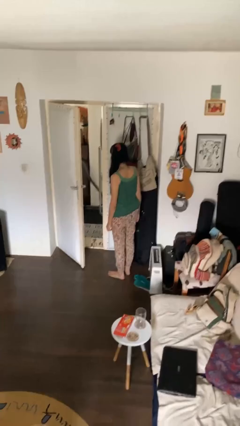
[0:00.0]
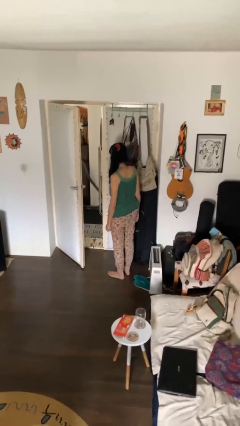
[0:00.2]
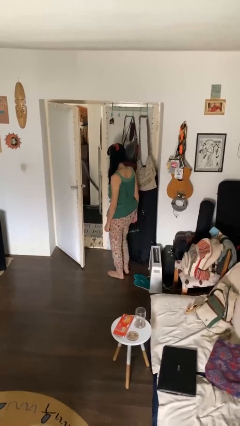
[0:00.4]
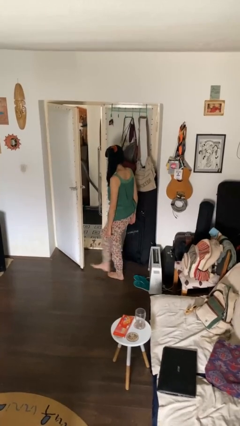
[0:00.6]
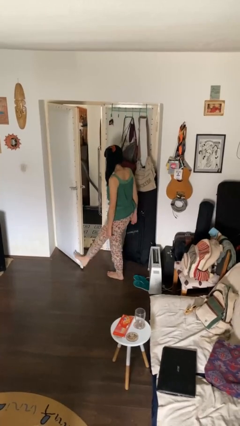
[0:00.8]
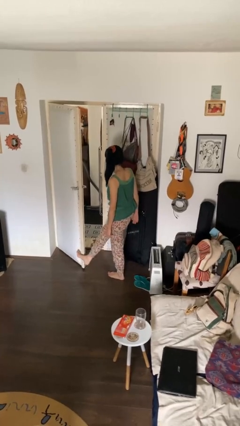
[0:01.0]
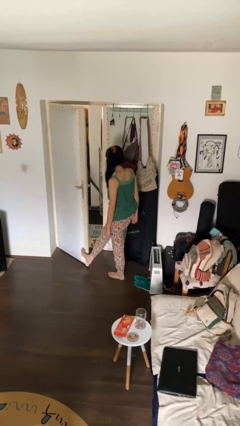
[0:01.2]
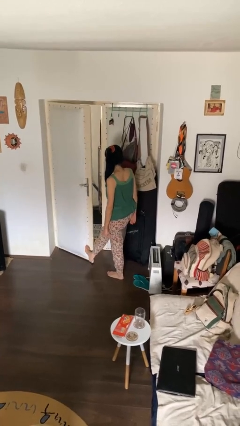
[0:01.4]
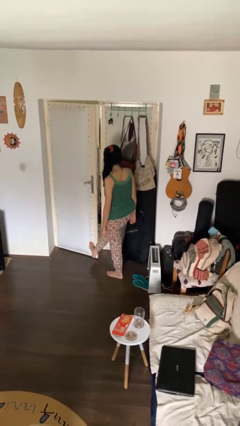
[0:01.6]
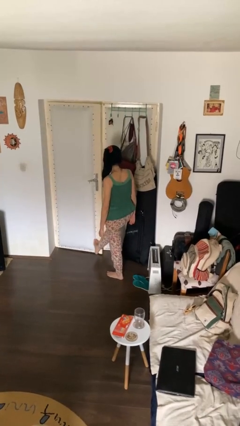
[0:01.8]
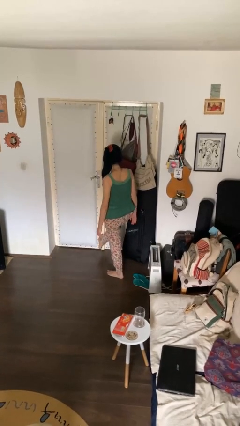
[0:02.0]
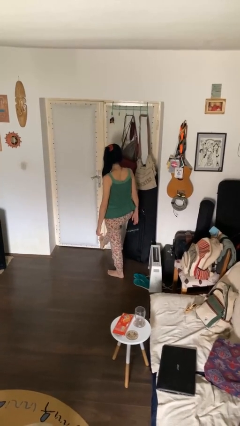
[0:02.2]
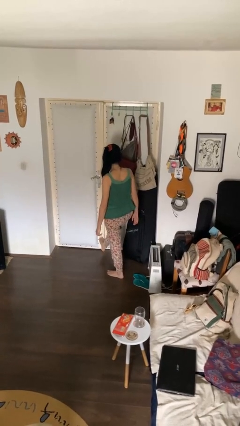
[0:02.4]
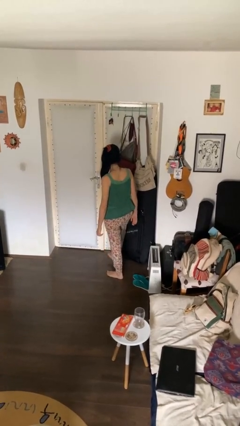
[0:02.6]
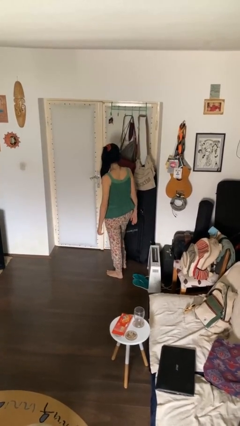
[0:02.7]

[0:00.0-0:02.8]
person closes door with foot

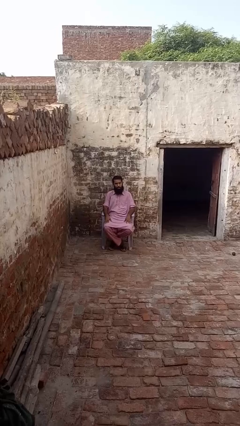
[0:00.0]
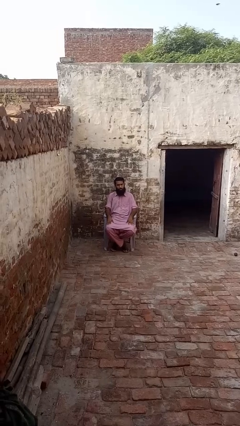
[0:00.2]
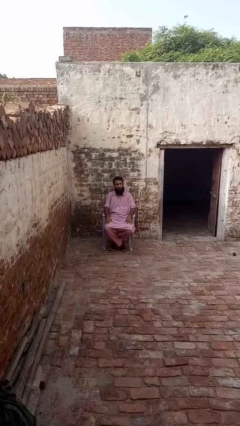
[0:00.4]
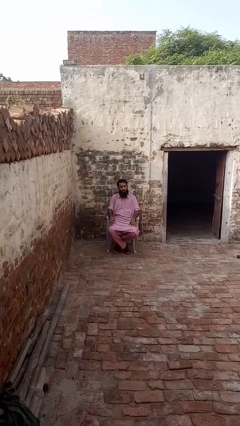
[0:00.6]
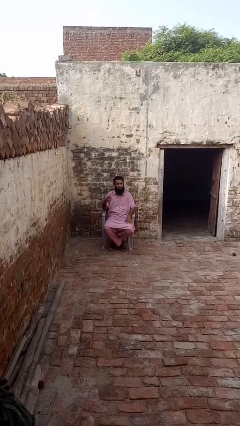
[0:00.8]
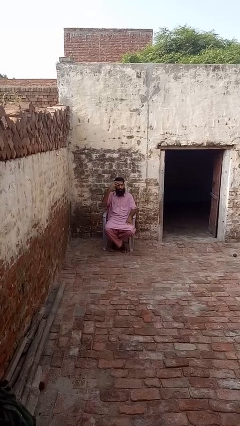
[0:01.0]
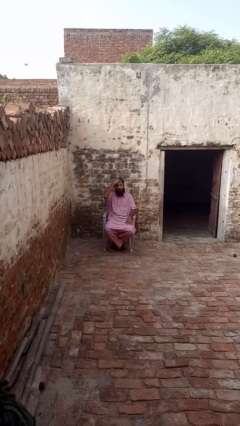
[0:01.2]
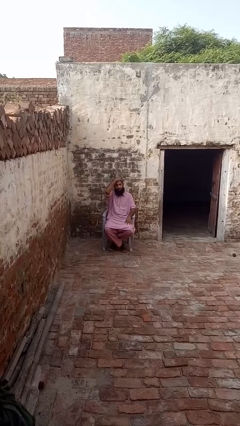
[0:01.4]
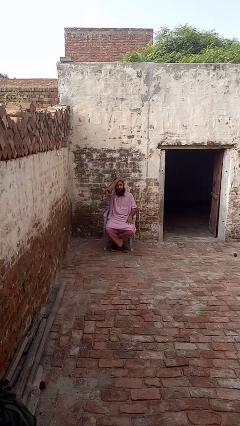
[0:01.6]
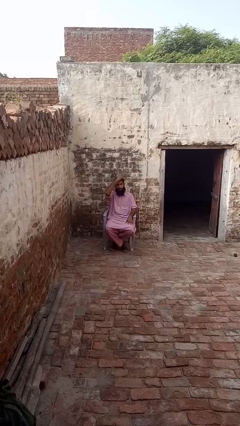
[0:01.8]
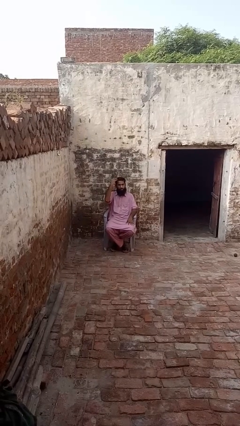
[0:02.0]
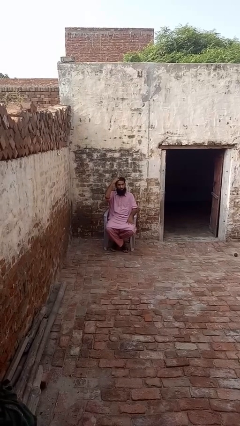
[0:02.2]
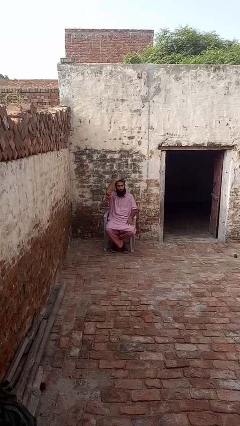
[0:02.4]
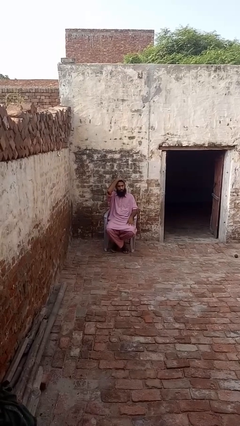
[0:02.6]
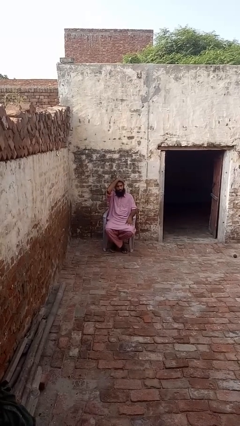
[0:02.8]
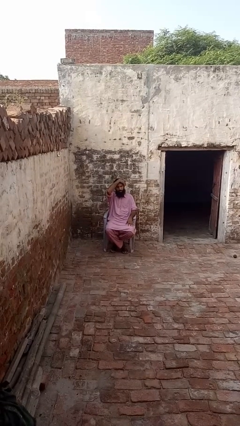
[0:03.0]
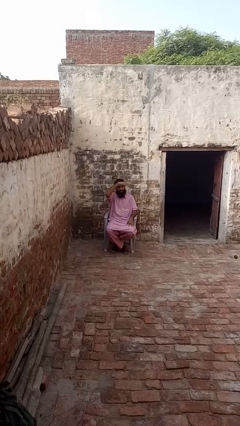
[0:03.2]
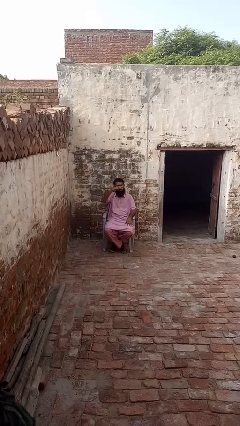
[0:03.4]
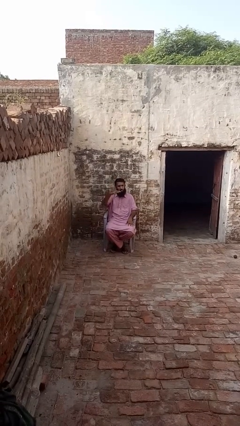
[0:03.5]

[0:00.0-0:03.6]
person strokes hair

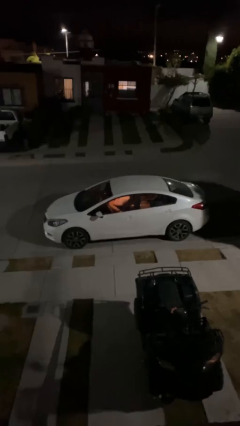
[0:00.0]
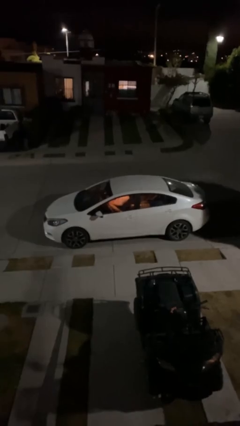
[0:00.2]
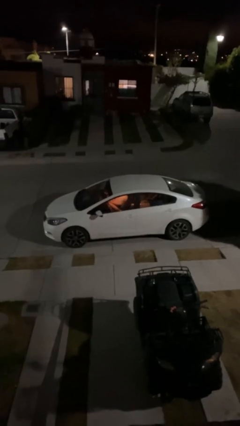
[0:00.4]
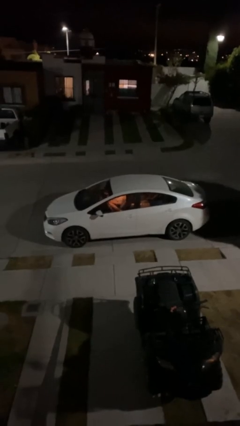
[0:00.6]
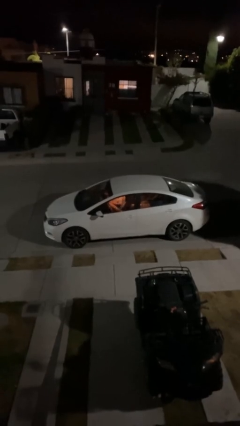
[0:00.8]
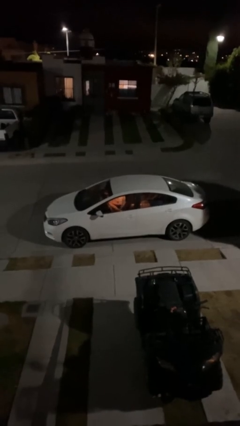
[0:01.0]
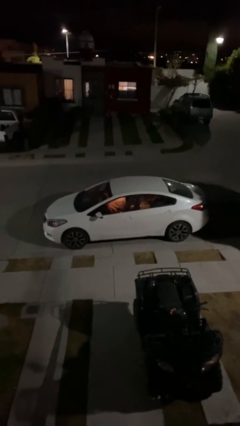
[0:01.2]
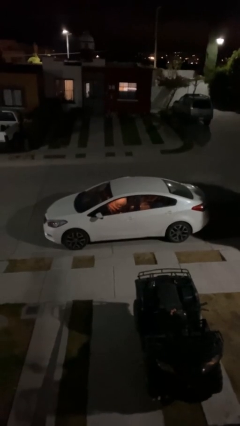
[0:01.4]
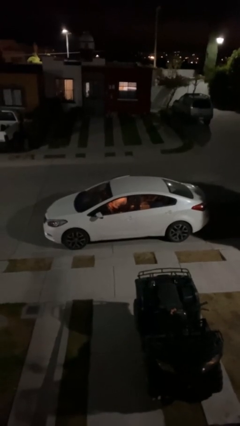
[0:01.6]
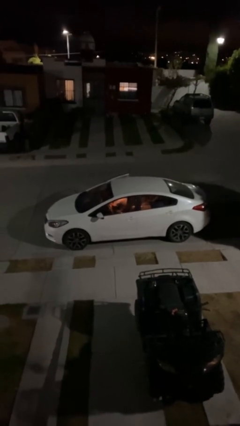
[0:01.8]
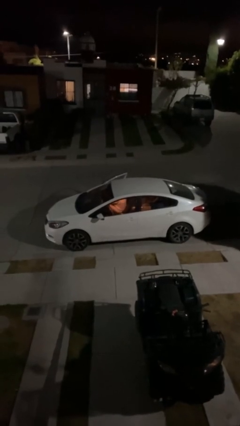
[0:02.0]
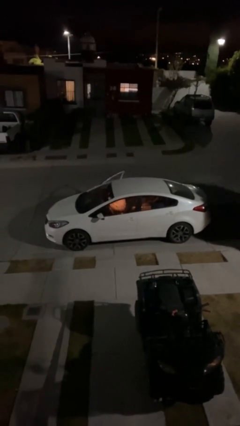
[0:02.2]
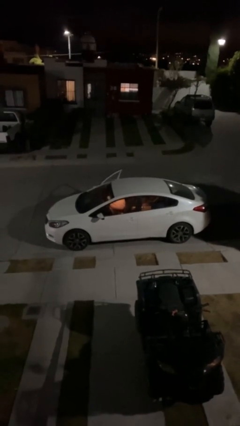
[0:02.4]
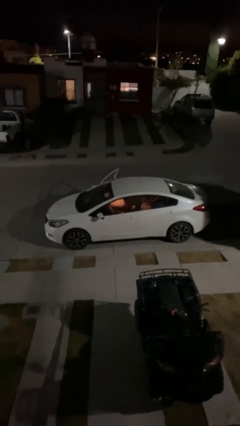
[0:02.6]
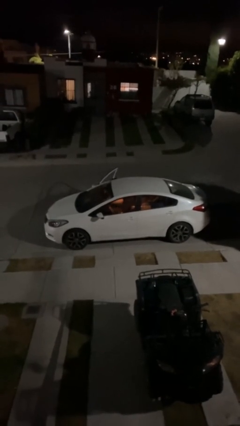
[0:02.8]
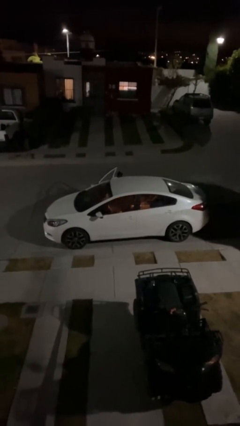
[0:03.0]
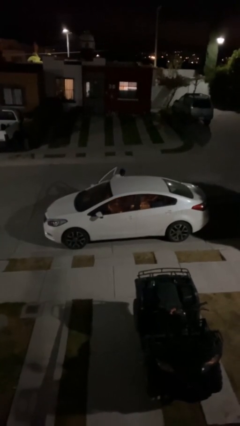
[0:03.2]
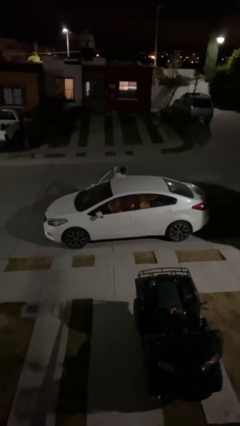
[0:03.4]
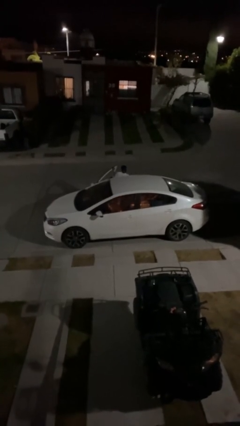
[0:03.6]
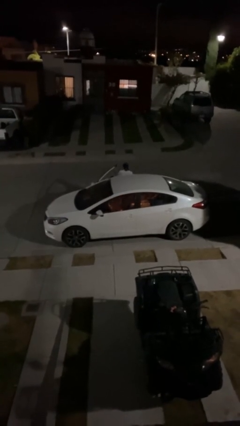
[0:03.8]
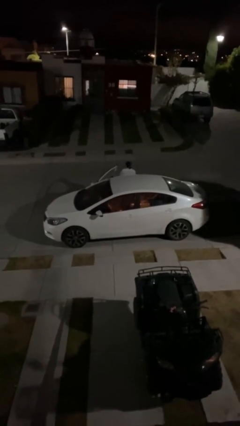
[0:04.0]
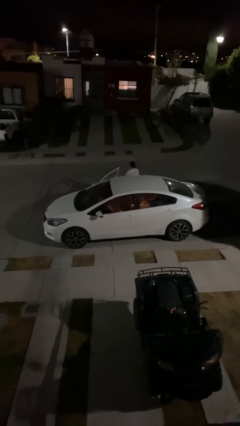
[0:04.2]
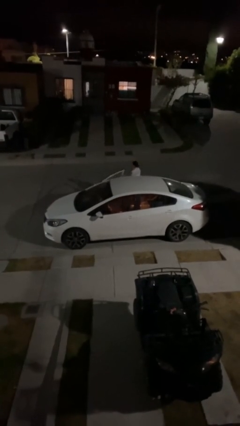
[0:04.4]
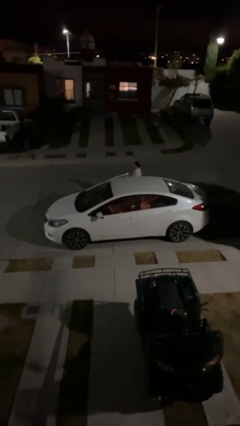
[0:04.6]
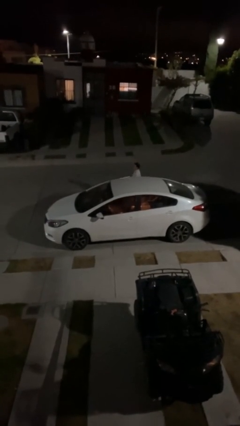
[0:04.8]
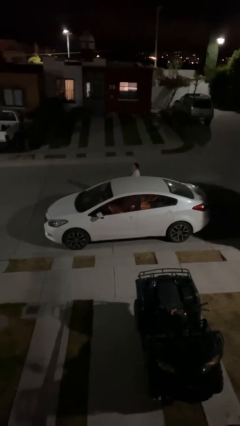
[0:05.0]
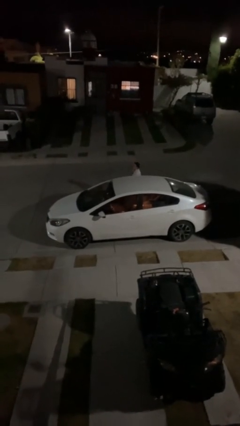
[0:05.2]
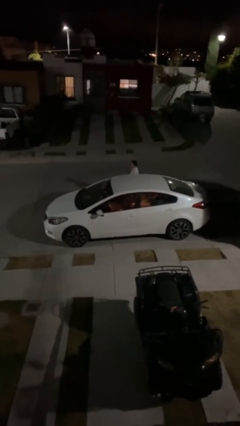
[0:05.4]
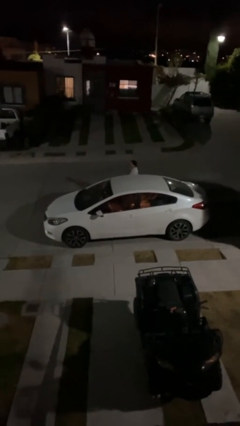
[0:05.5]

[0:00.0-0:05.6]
car drops off person

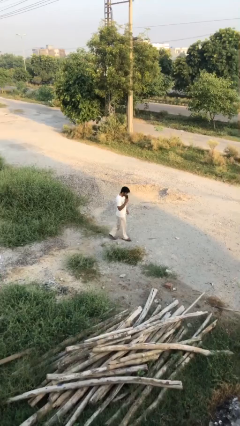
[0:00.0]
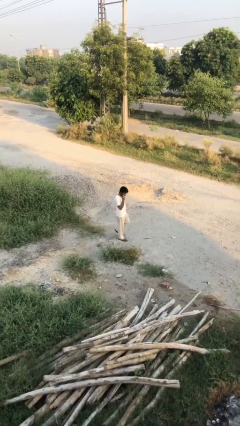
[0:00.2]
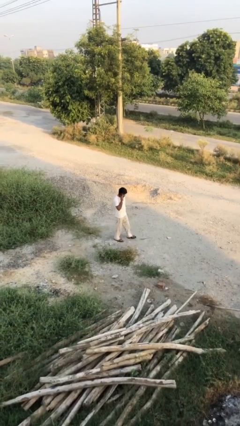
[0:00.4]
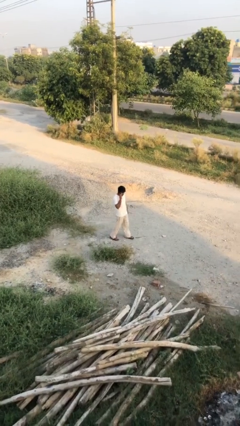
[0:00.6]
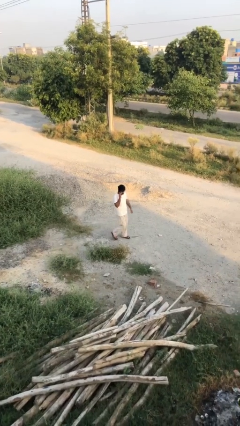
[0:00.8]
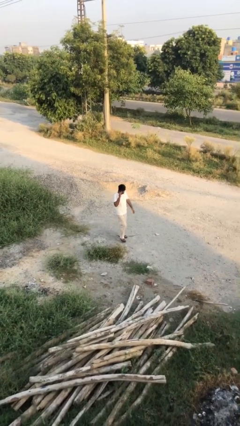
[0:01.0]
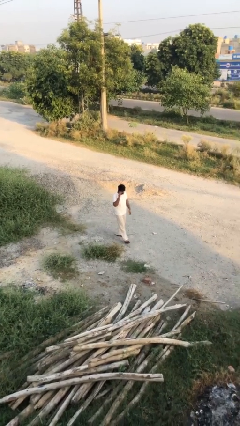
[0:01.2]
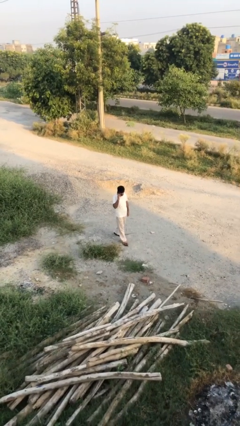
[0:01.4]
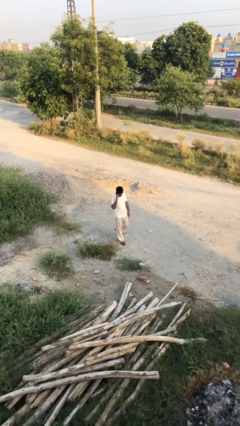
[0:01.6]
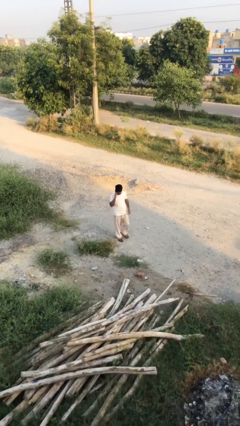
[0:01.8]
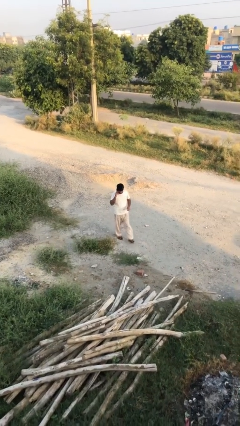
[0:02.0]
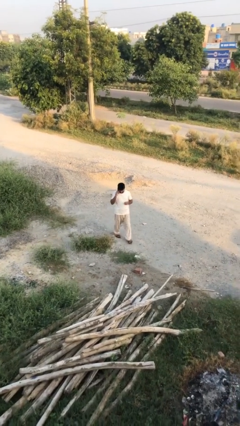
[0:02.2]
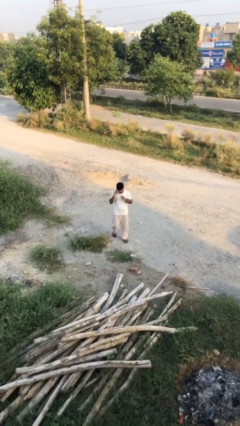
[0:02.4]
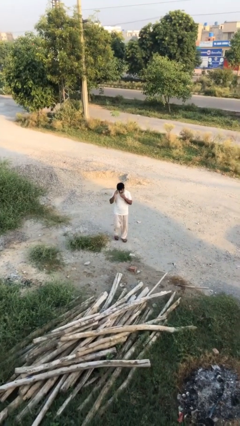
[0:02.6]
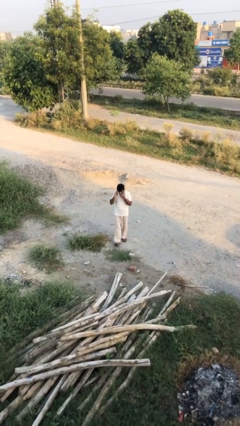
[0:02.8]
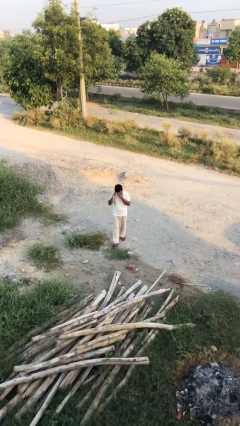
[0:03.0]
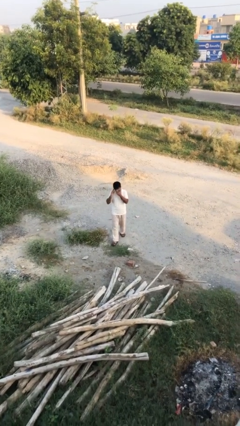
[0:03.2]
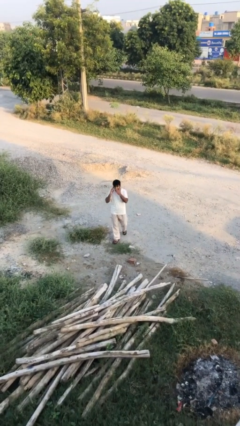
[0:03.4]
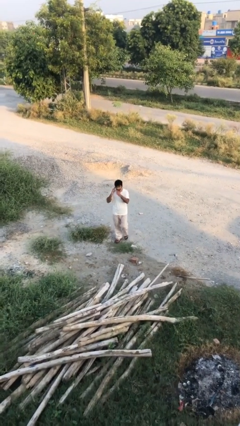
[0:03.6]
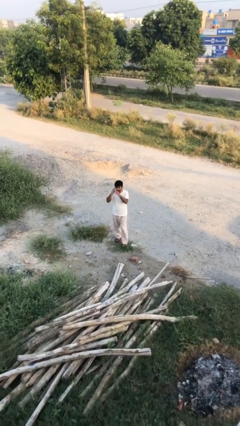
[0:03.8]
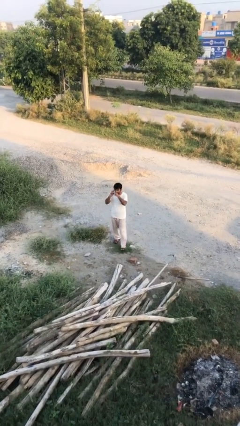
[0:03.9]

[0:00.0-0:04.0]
person talks on phone

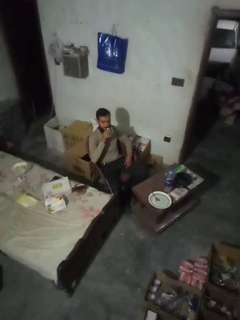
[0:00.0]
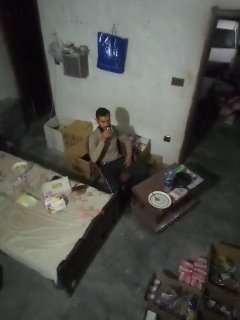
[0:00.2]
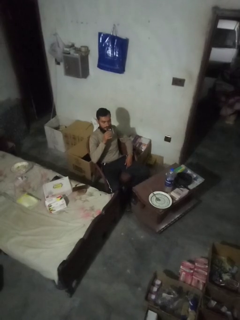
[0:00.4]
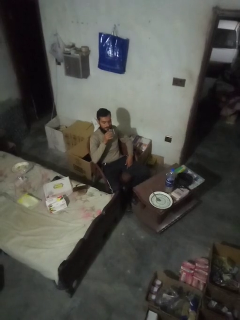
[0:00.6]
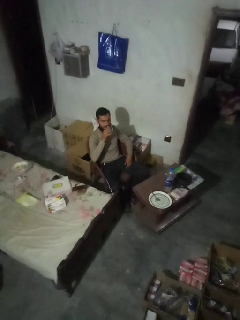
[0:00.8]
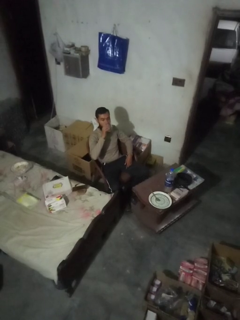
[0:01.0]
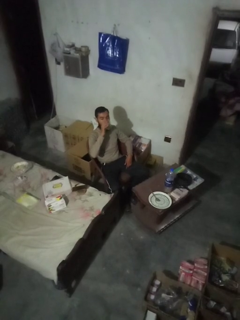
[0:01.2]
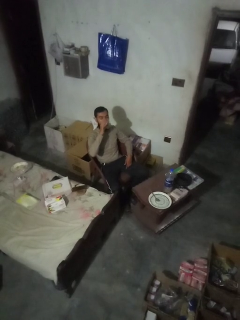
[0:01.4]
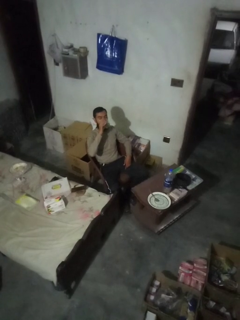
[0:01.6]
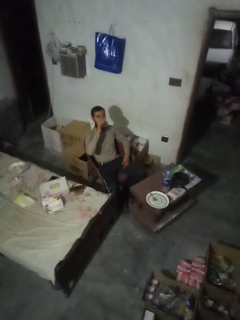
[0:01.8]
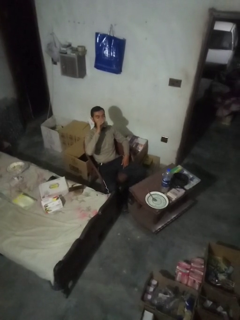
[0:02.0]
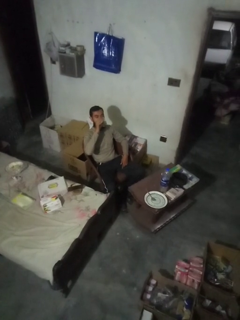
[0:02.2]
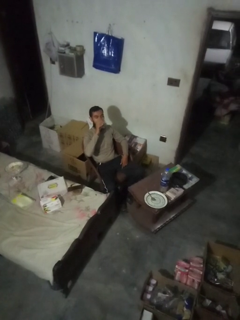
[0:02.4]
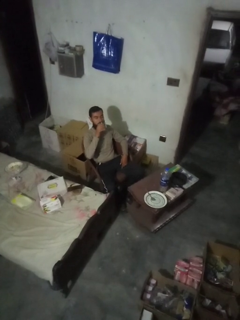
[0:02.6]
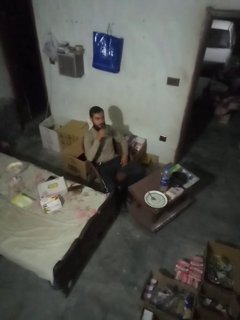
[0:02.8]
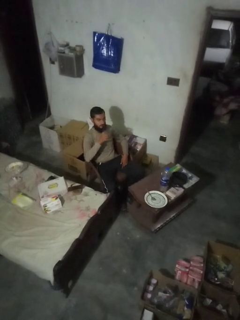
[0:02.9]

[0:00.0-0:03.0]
person drinks from shotglass
